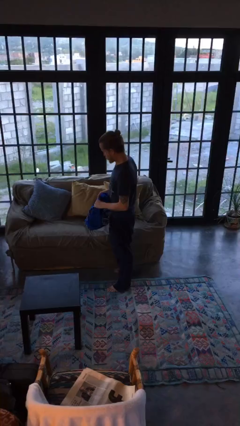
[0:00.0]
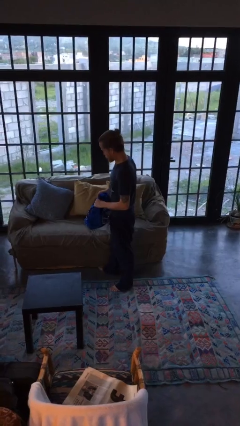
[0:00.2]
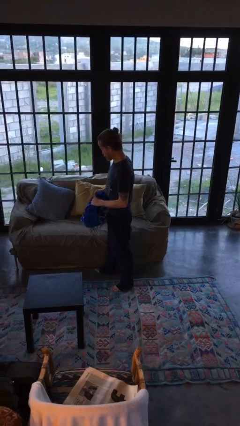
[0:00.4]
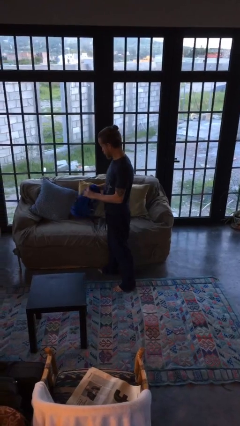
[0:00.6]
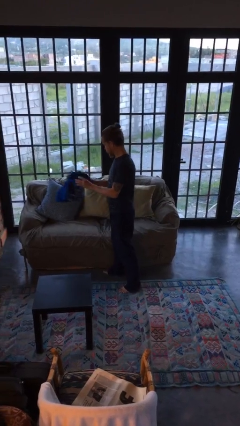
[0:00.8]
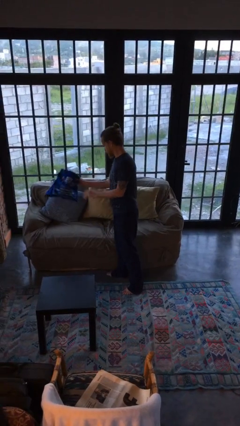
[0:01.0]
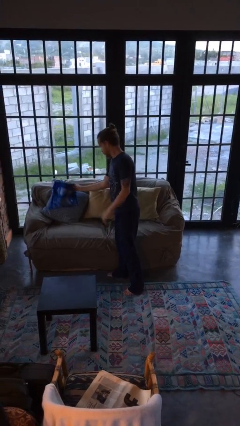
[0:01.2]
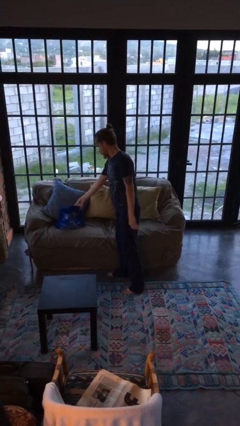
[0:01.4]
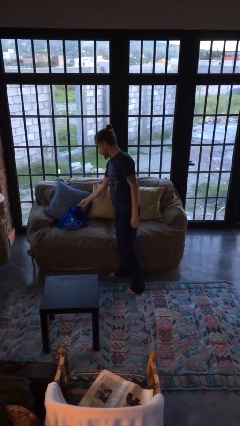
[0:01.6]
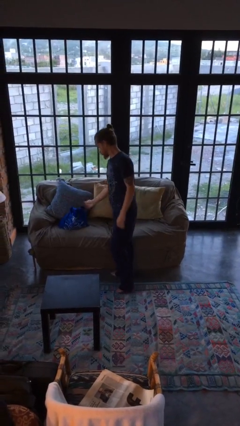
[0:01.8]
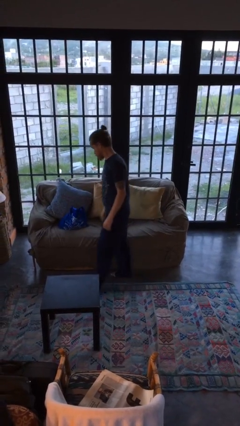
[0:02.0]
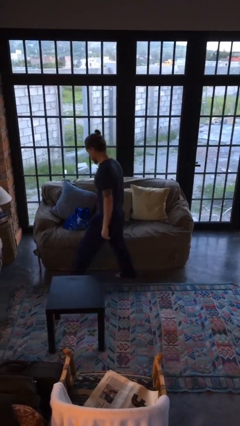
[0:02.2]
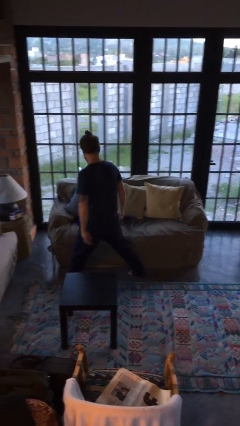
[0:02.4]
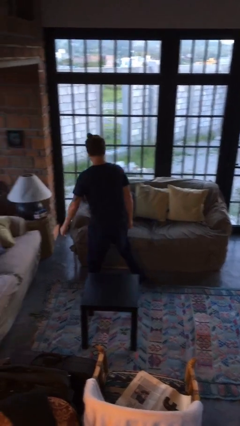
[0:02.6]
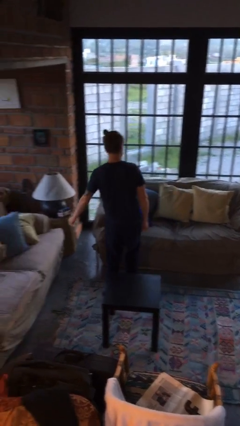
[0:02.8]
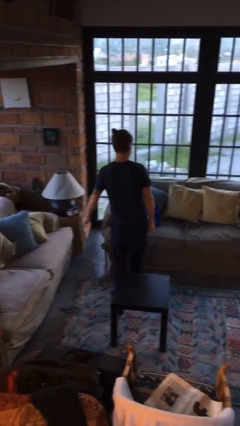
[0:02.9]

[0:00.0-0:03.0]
person puts down object on couch

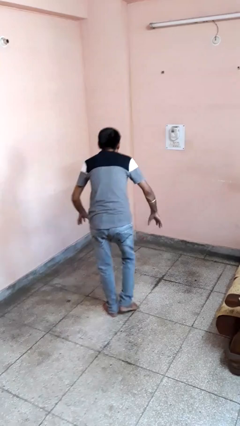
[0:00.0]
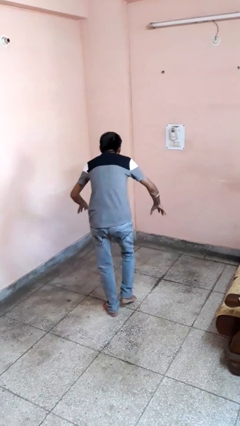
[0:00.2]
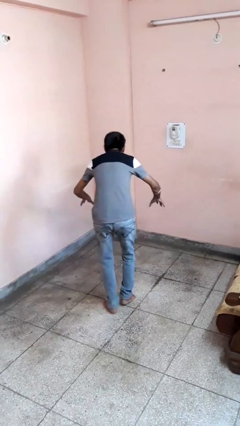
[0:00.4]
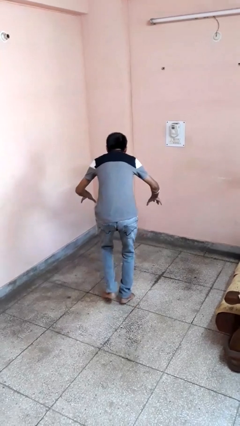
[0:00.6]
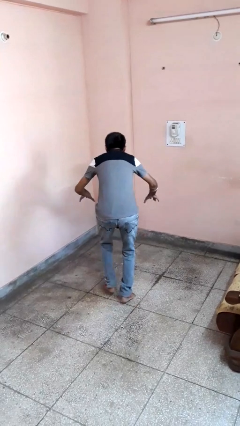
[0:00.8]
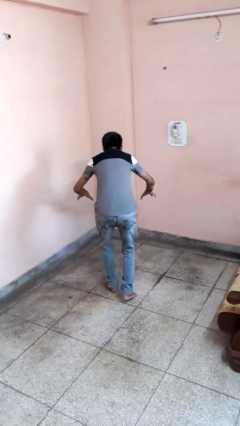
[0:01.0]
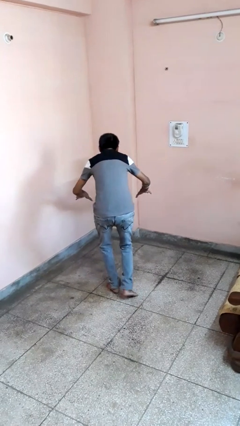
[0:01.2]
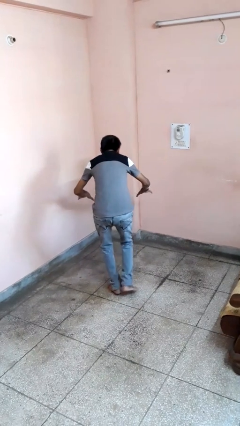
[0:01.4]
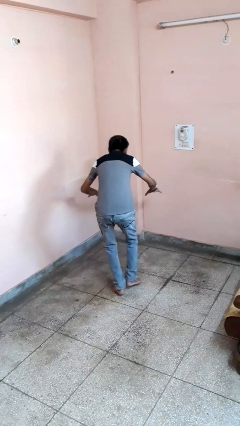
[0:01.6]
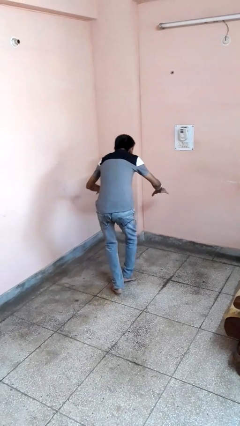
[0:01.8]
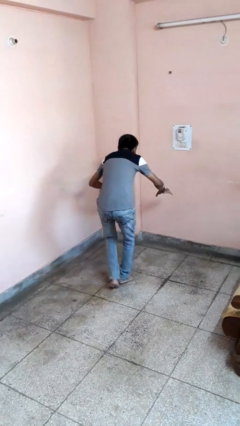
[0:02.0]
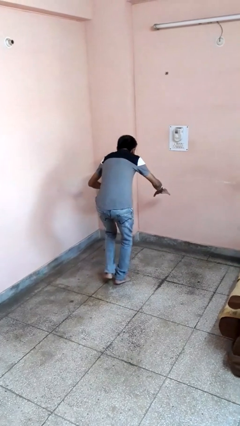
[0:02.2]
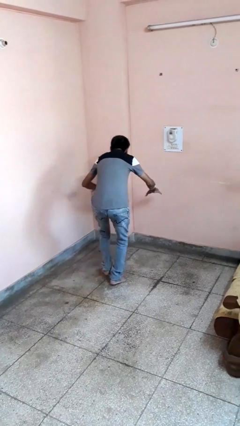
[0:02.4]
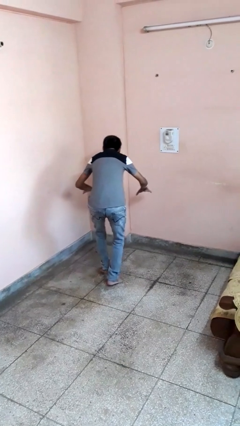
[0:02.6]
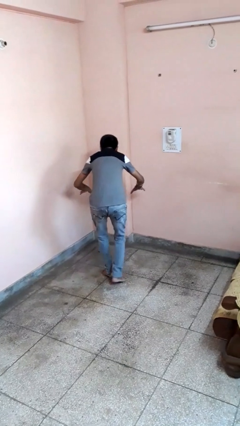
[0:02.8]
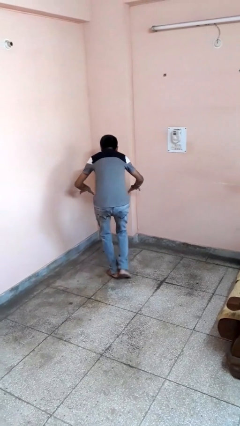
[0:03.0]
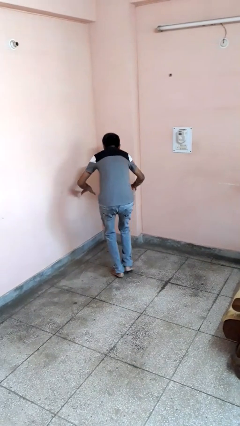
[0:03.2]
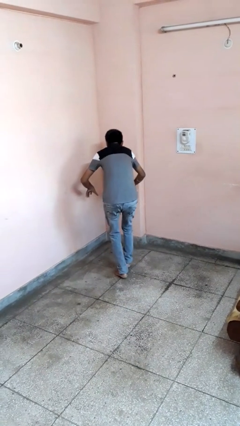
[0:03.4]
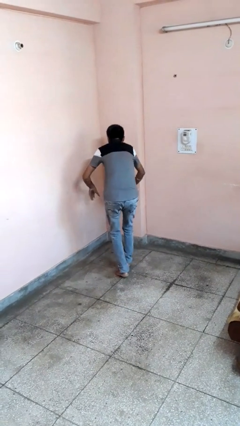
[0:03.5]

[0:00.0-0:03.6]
person walks tiptoe

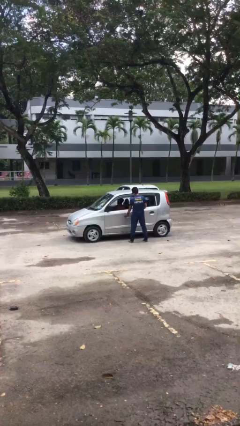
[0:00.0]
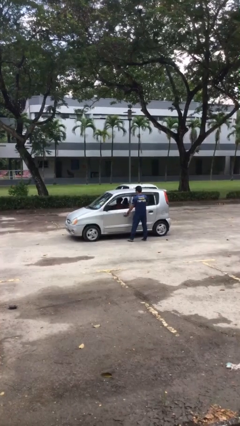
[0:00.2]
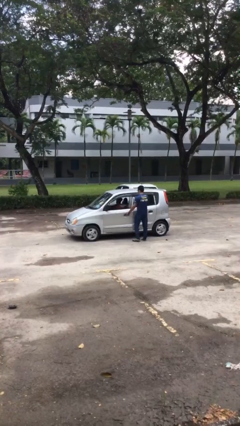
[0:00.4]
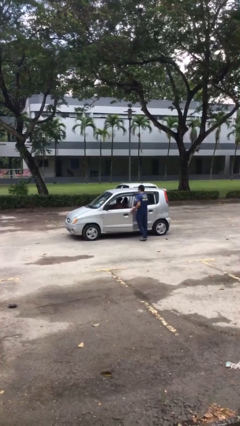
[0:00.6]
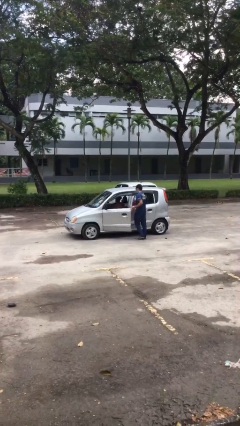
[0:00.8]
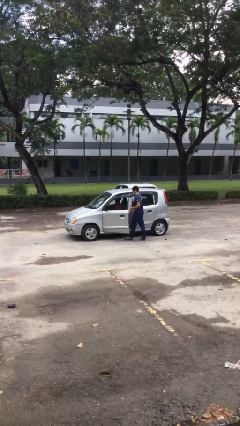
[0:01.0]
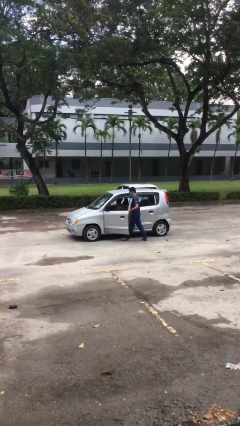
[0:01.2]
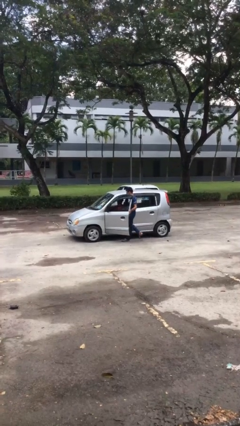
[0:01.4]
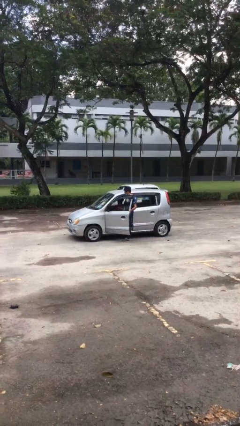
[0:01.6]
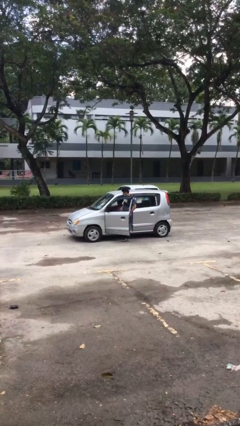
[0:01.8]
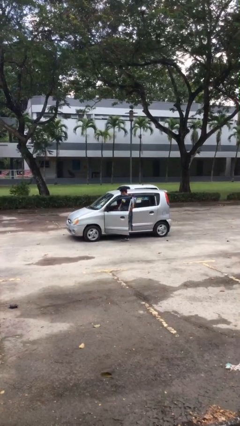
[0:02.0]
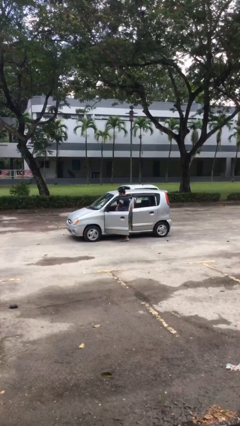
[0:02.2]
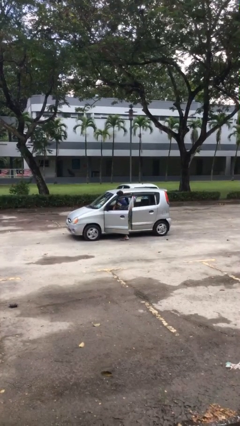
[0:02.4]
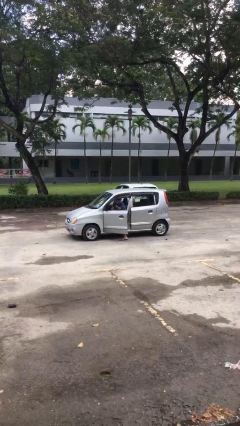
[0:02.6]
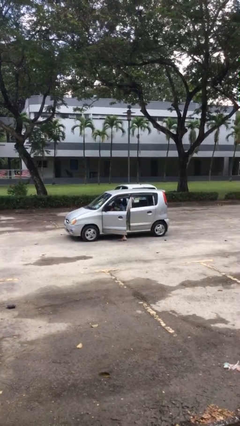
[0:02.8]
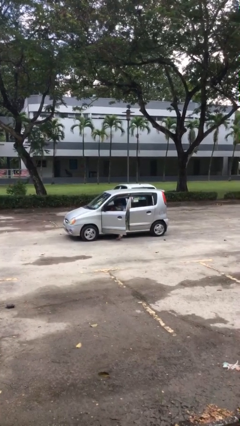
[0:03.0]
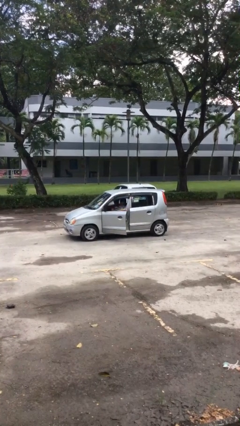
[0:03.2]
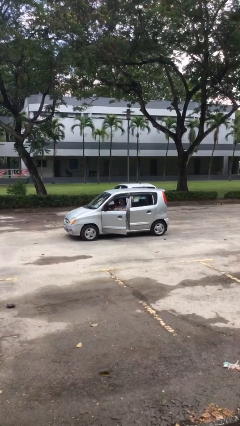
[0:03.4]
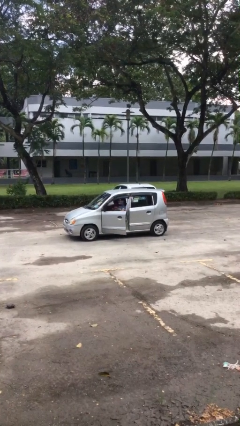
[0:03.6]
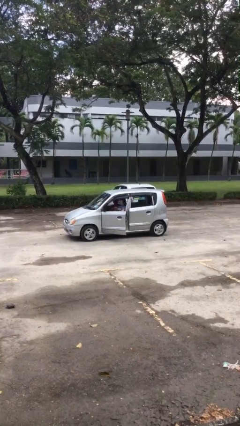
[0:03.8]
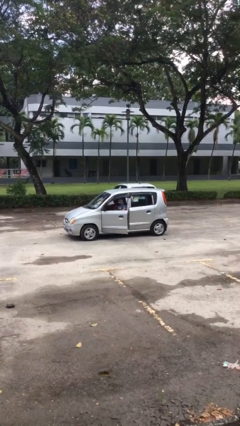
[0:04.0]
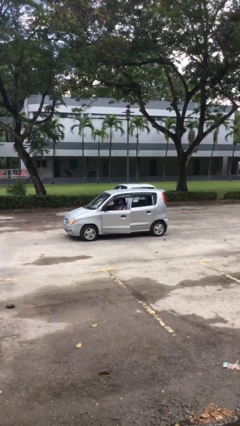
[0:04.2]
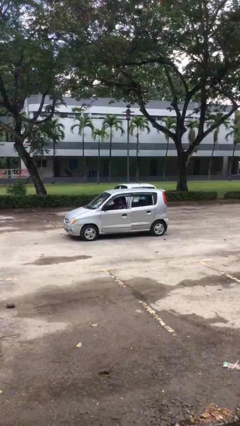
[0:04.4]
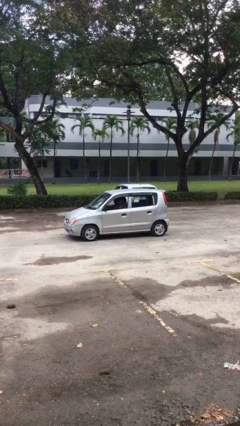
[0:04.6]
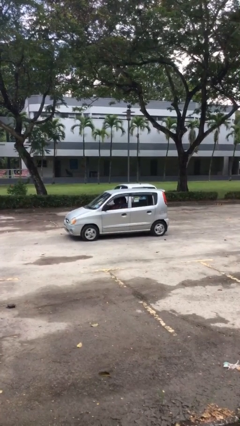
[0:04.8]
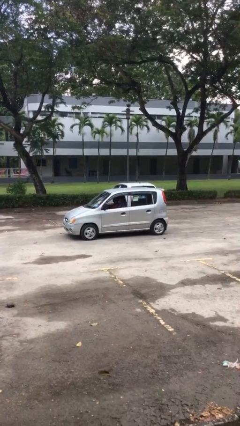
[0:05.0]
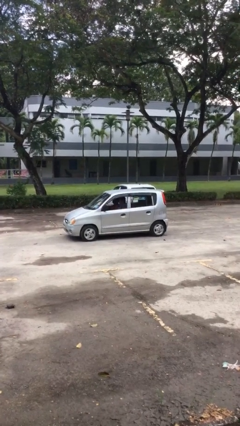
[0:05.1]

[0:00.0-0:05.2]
car picks up person

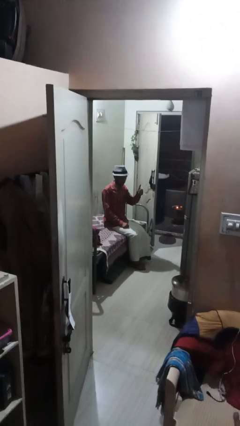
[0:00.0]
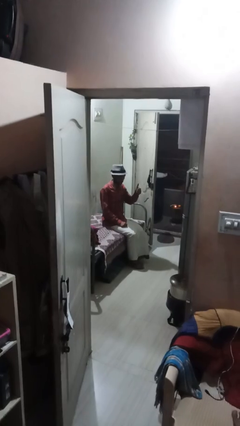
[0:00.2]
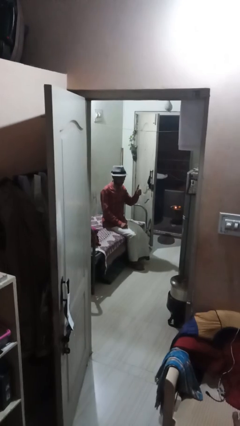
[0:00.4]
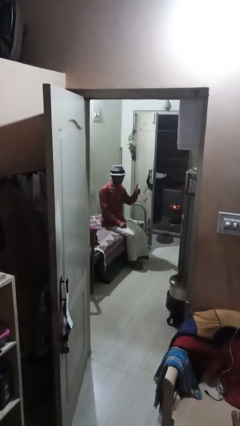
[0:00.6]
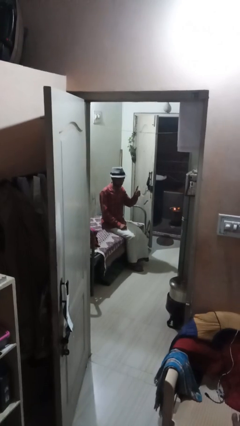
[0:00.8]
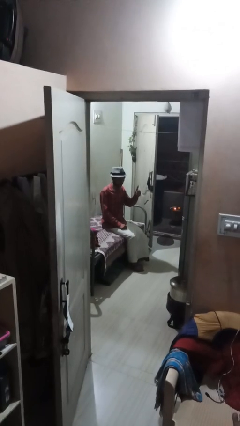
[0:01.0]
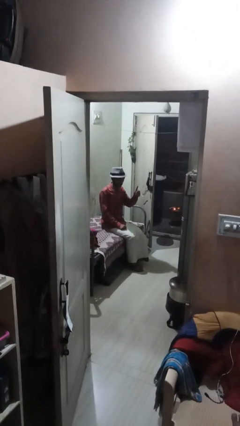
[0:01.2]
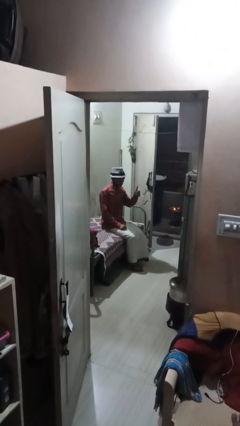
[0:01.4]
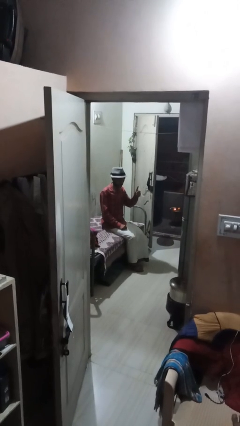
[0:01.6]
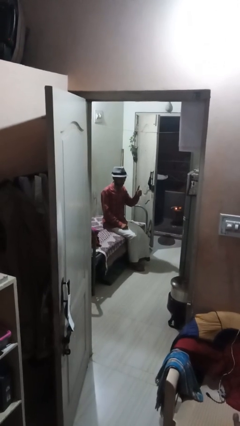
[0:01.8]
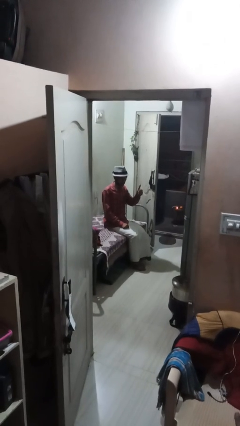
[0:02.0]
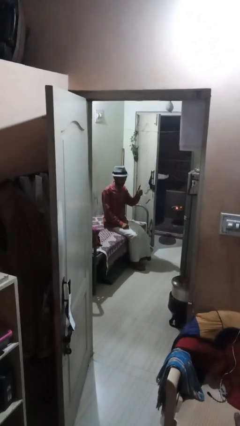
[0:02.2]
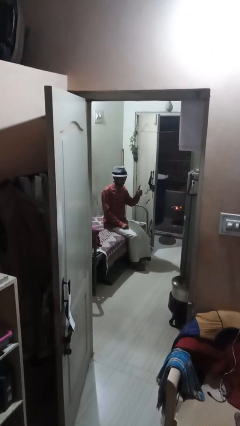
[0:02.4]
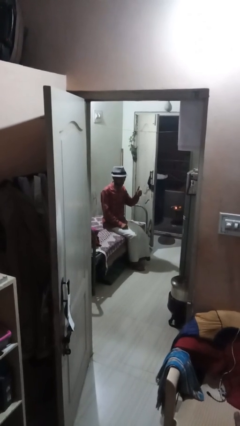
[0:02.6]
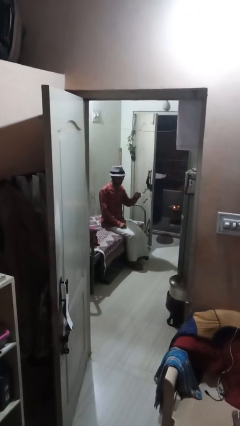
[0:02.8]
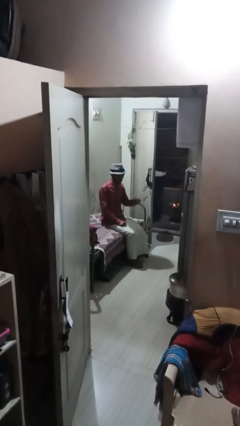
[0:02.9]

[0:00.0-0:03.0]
person gestures thumbs up

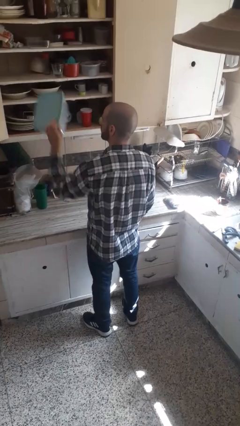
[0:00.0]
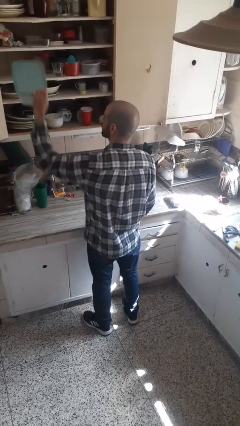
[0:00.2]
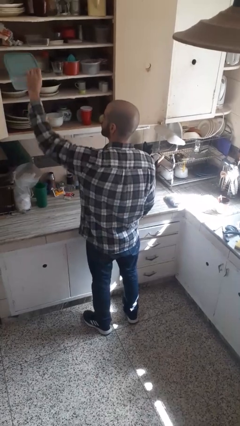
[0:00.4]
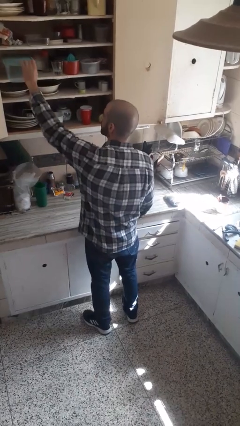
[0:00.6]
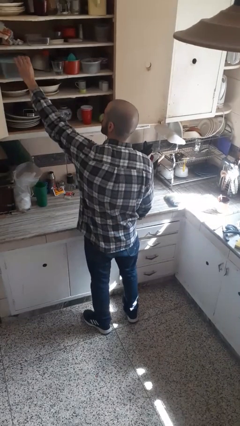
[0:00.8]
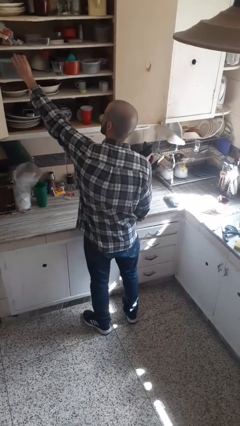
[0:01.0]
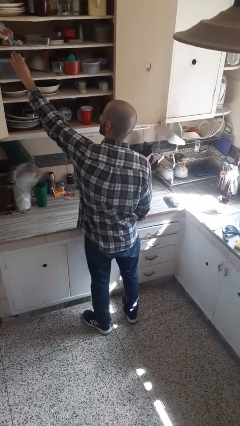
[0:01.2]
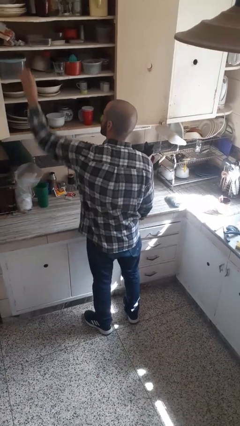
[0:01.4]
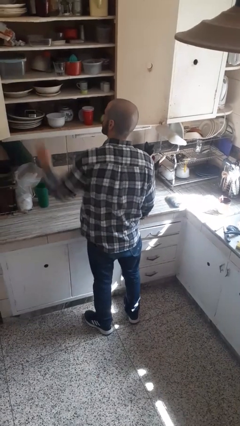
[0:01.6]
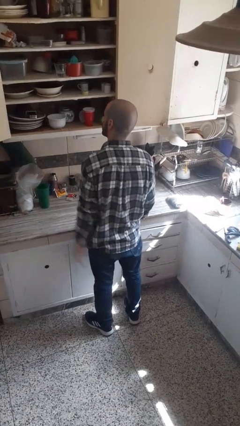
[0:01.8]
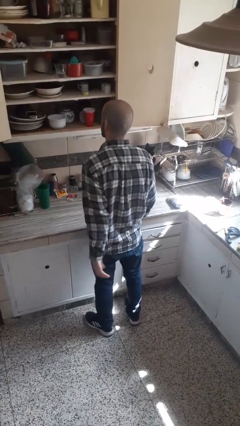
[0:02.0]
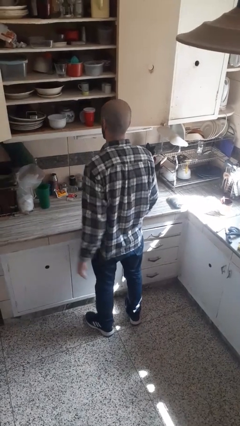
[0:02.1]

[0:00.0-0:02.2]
person puts down object into cabinet

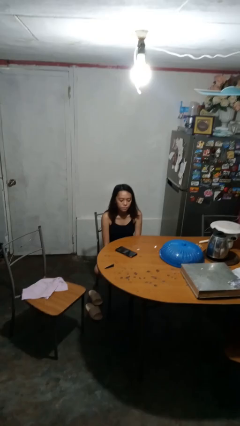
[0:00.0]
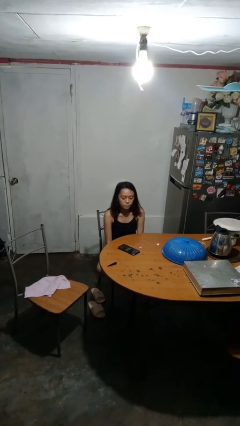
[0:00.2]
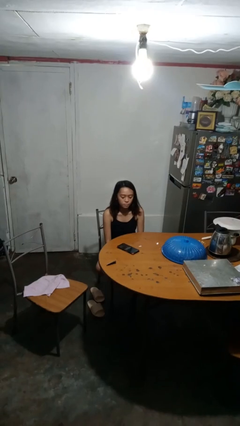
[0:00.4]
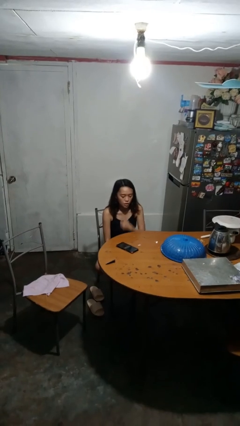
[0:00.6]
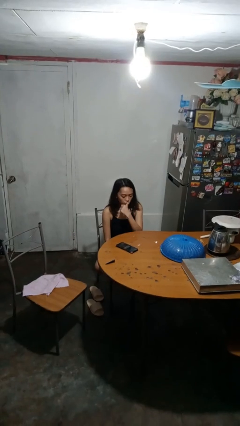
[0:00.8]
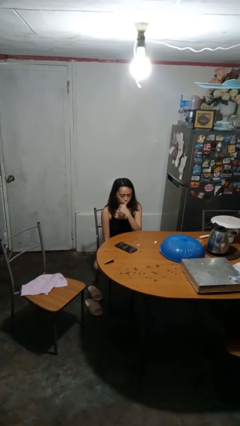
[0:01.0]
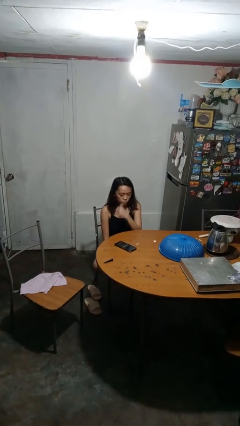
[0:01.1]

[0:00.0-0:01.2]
person licks fingers
